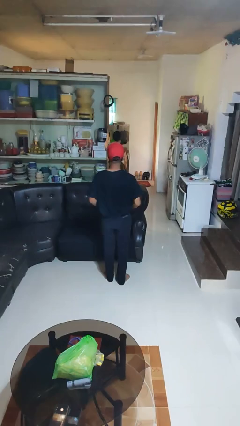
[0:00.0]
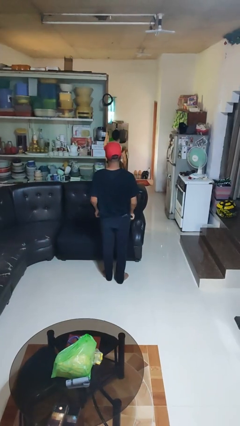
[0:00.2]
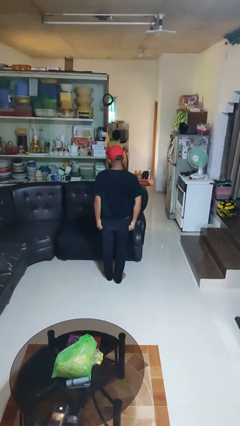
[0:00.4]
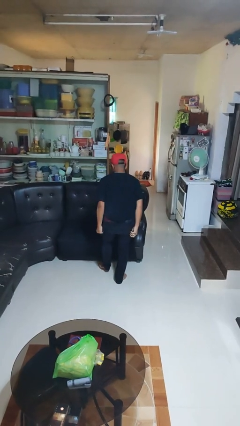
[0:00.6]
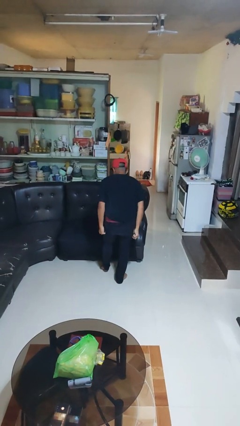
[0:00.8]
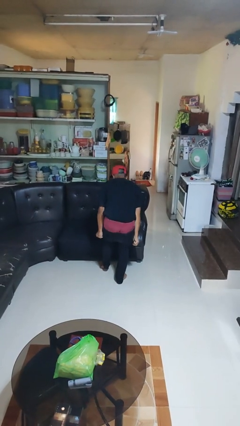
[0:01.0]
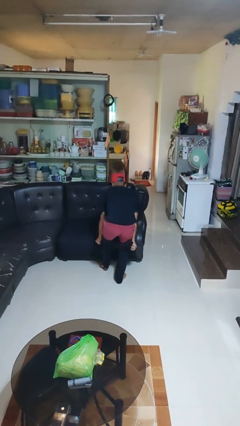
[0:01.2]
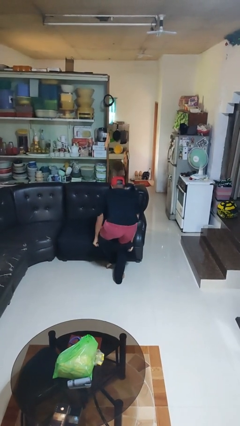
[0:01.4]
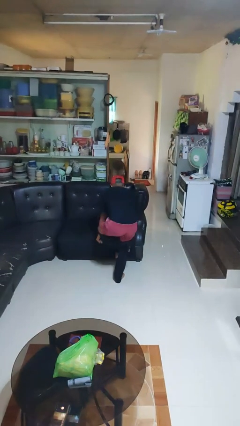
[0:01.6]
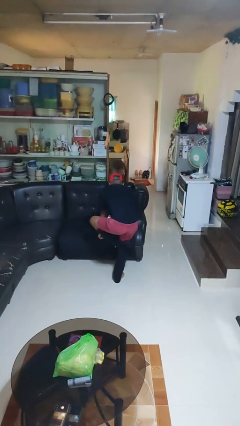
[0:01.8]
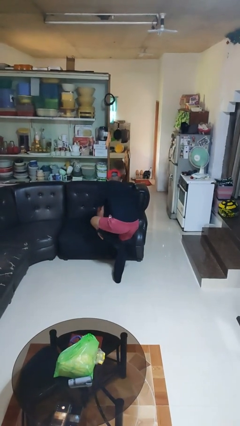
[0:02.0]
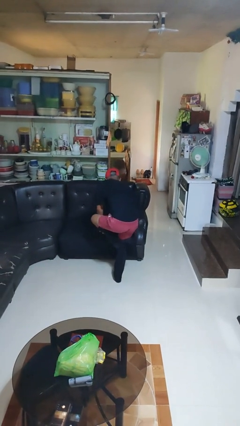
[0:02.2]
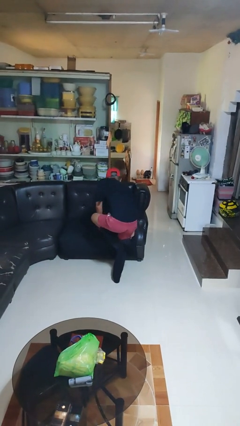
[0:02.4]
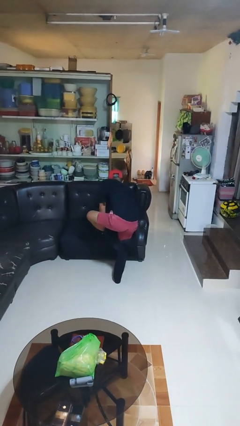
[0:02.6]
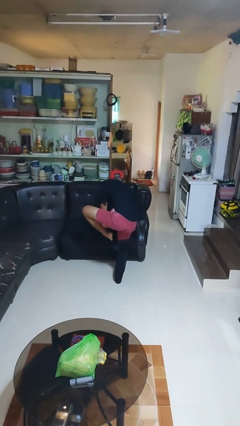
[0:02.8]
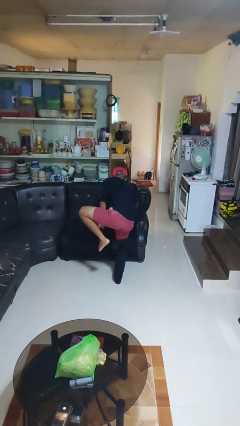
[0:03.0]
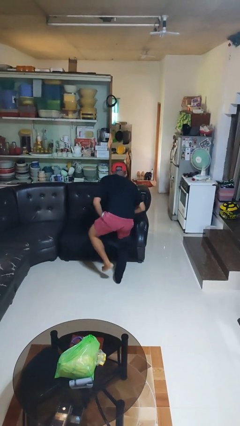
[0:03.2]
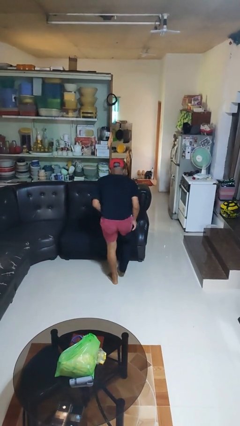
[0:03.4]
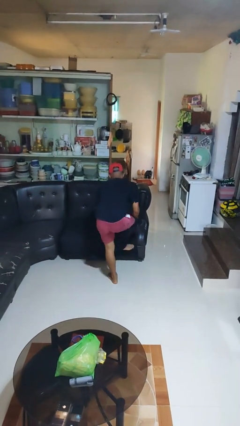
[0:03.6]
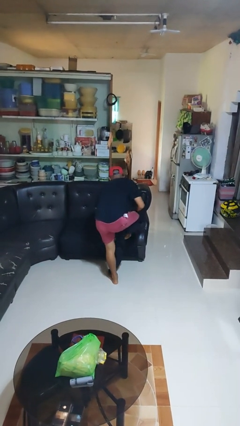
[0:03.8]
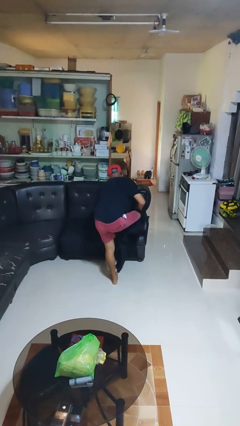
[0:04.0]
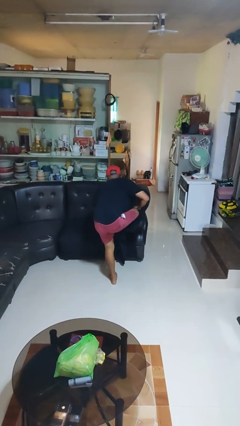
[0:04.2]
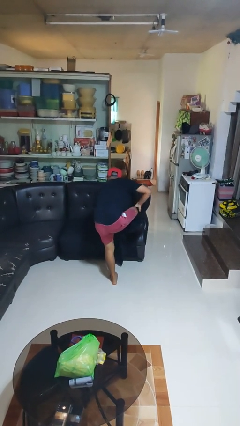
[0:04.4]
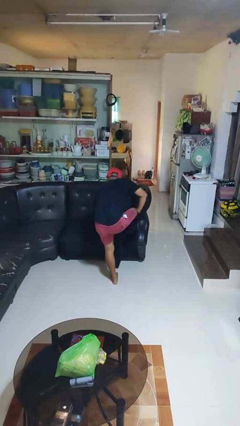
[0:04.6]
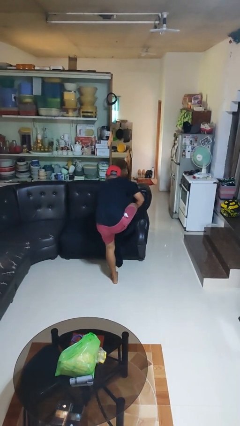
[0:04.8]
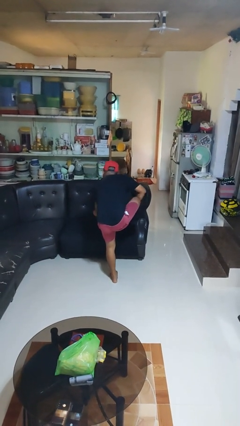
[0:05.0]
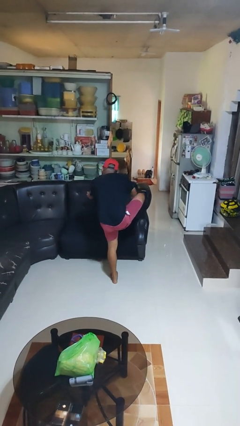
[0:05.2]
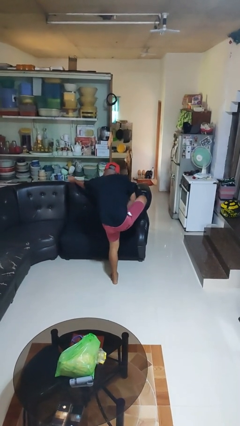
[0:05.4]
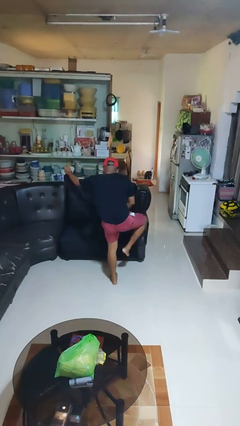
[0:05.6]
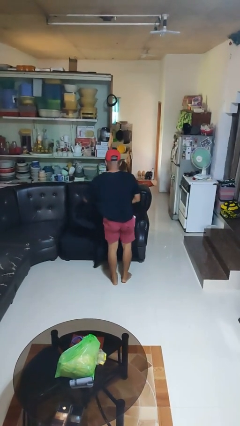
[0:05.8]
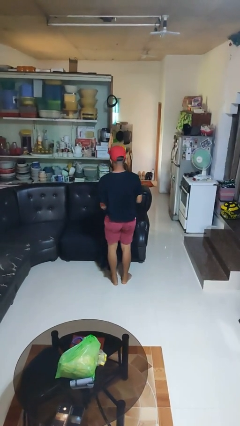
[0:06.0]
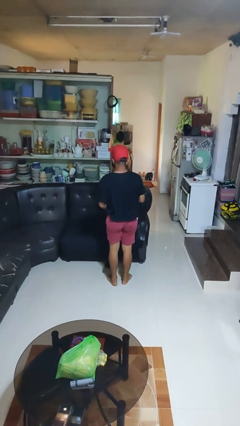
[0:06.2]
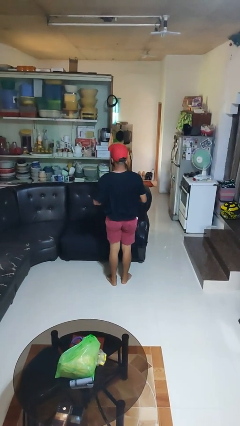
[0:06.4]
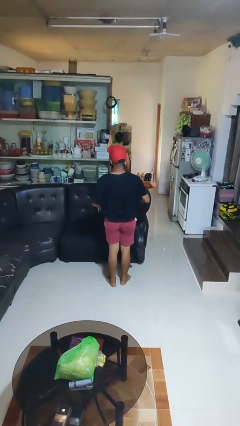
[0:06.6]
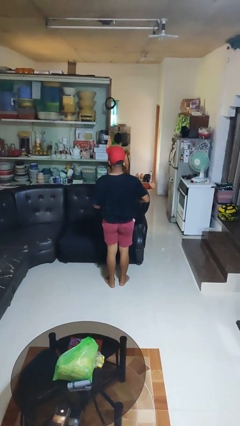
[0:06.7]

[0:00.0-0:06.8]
person takes off pants

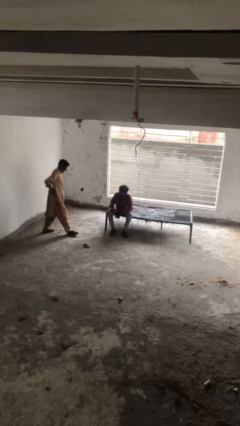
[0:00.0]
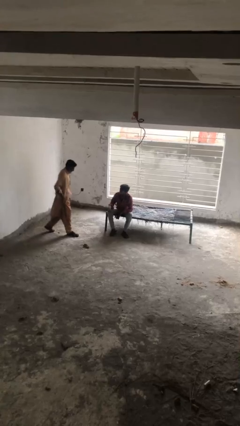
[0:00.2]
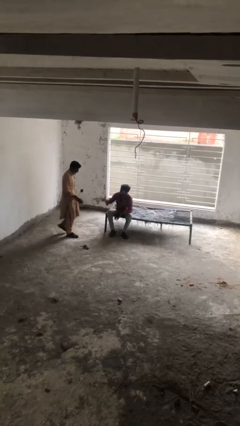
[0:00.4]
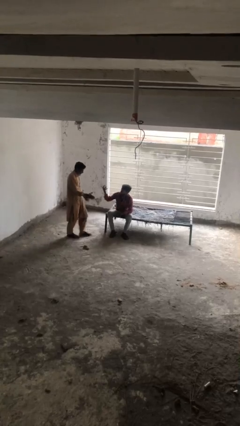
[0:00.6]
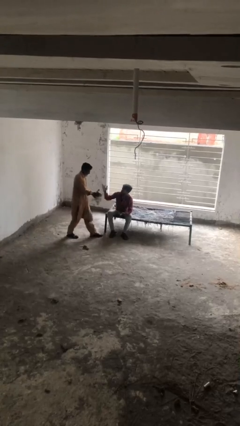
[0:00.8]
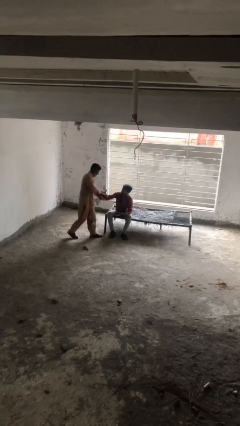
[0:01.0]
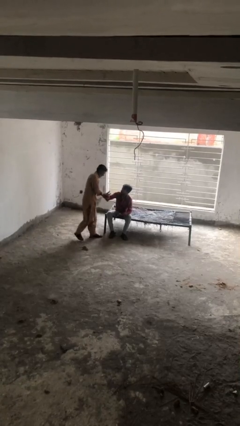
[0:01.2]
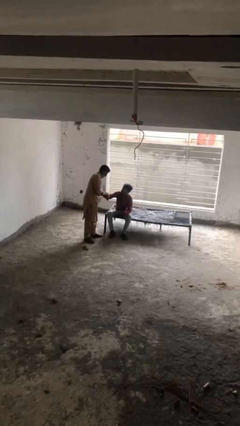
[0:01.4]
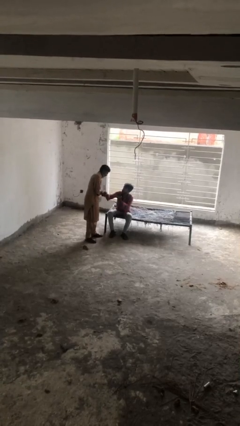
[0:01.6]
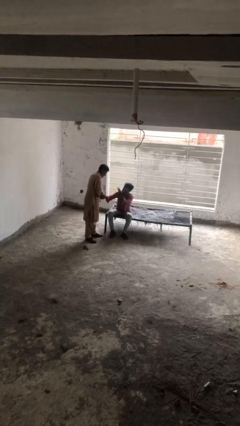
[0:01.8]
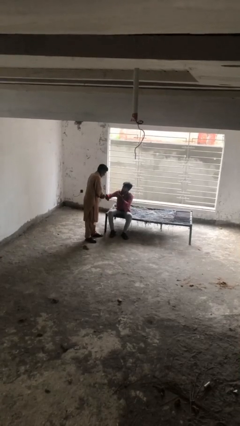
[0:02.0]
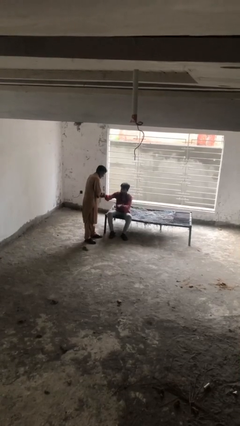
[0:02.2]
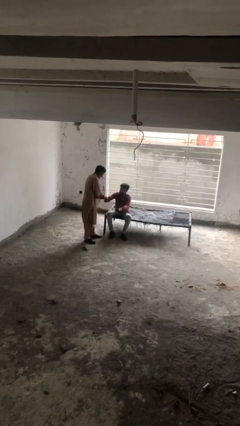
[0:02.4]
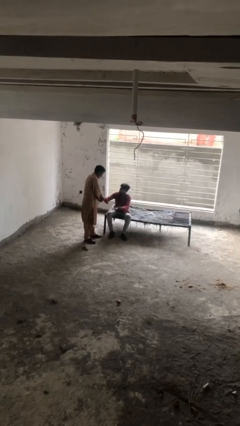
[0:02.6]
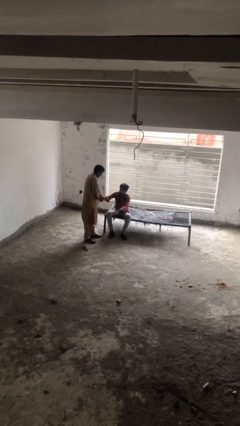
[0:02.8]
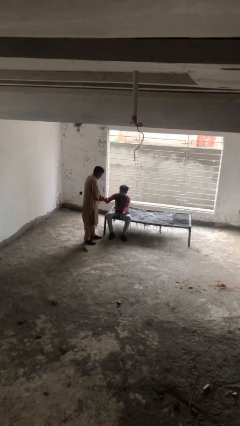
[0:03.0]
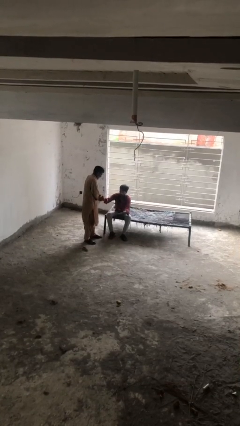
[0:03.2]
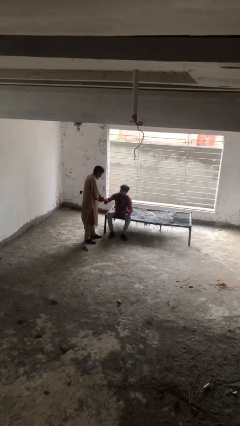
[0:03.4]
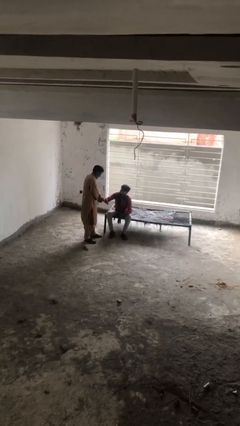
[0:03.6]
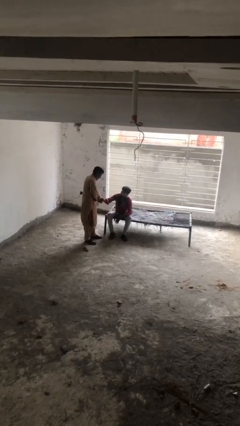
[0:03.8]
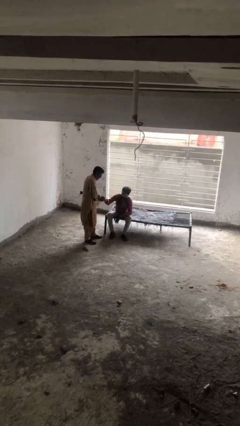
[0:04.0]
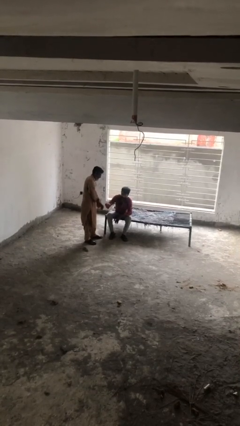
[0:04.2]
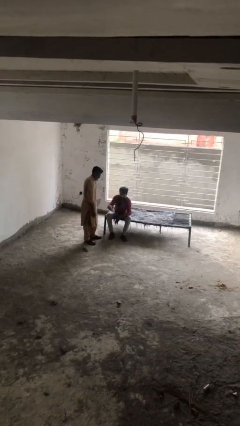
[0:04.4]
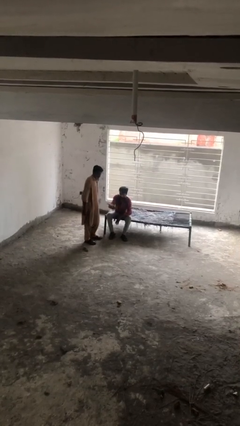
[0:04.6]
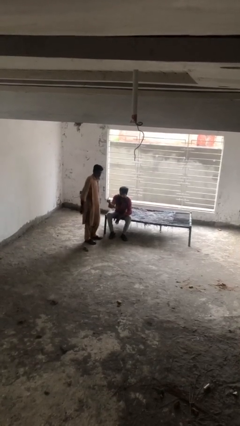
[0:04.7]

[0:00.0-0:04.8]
person shakes hand

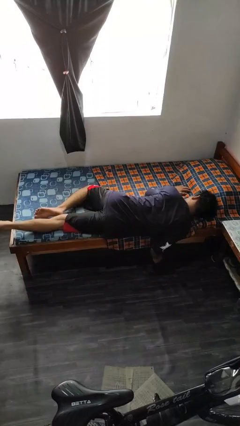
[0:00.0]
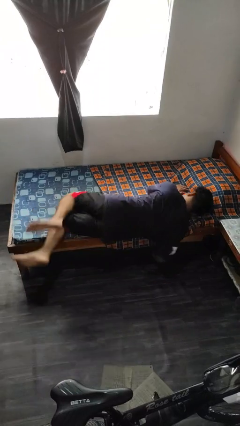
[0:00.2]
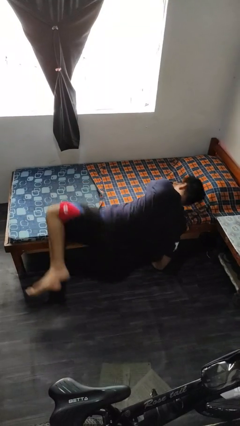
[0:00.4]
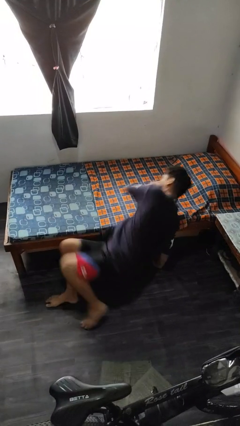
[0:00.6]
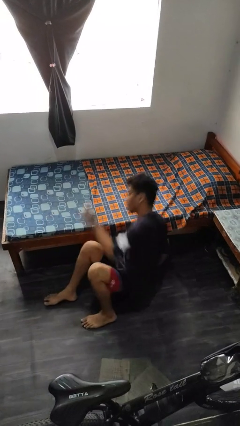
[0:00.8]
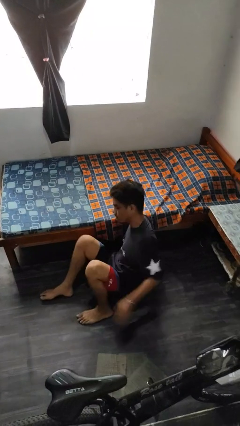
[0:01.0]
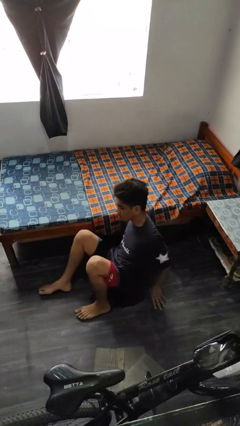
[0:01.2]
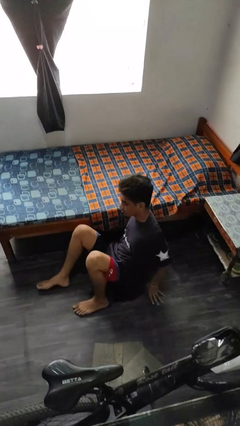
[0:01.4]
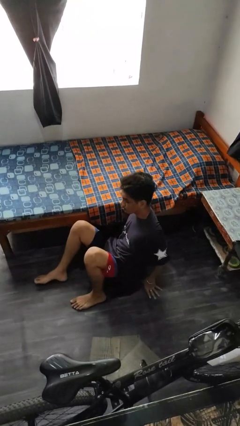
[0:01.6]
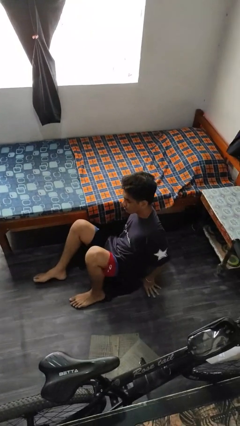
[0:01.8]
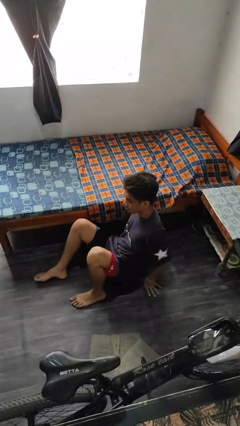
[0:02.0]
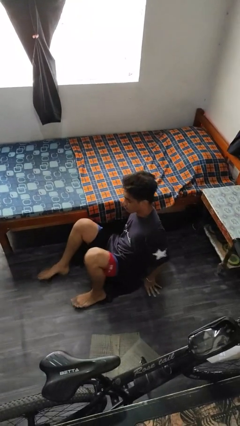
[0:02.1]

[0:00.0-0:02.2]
person falls from bed

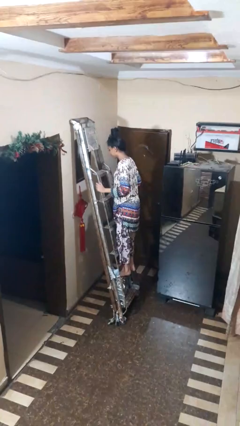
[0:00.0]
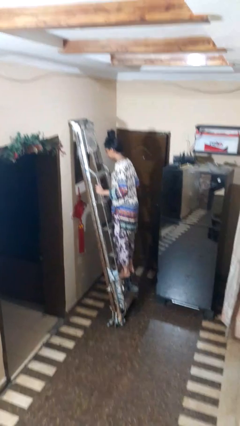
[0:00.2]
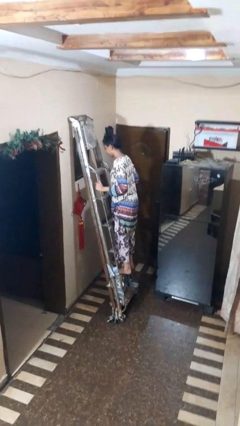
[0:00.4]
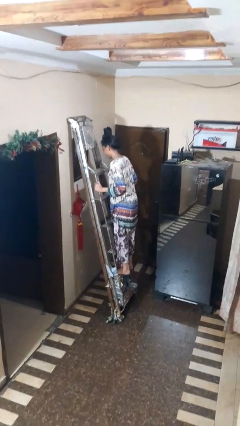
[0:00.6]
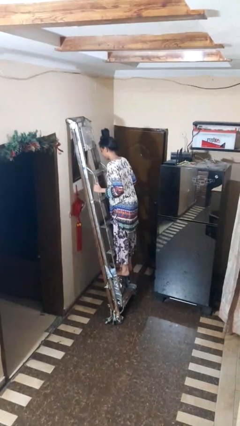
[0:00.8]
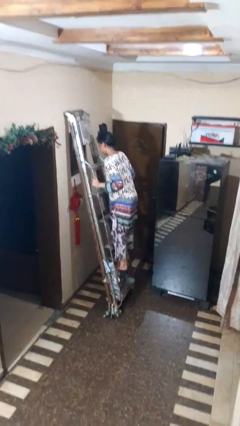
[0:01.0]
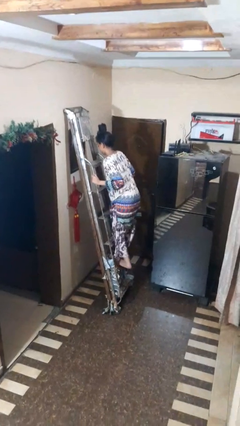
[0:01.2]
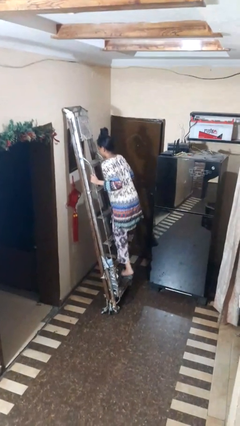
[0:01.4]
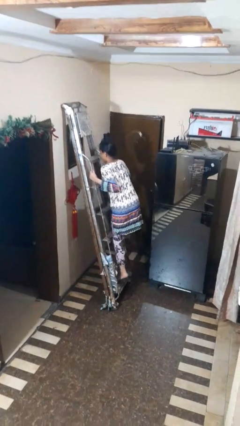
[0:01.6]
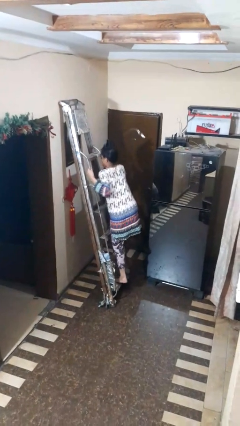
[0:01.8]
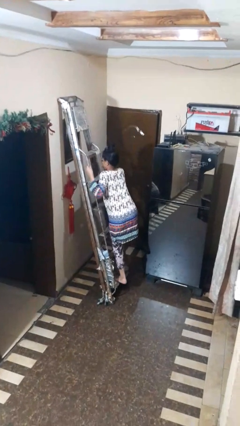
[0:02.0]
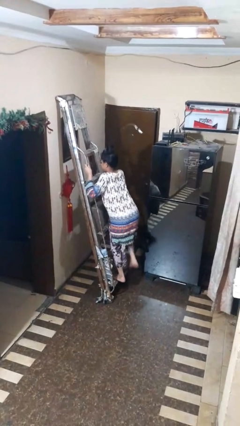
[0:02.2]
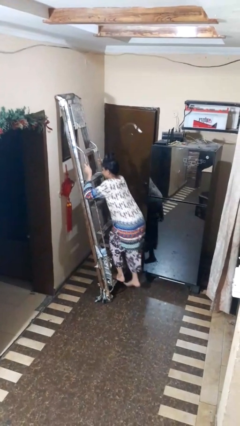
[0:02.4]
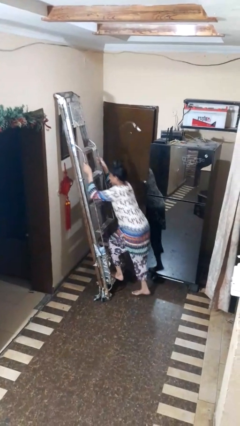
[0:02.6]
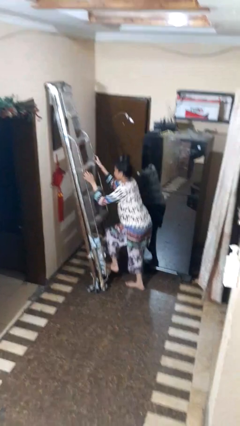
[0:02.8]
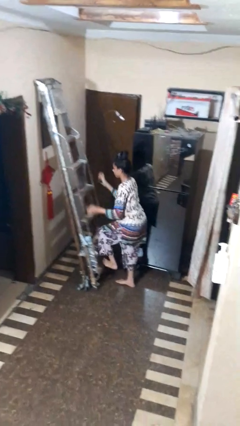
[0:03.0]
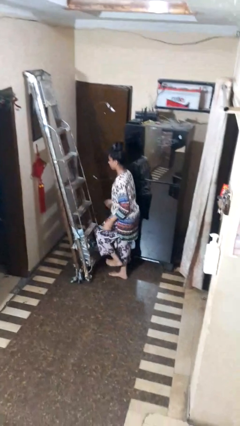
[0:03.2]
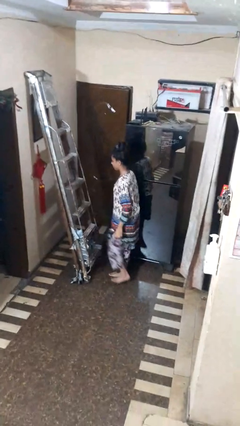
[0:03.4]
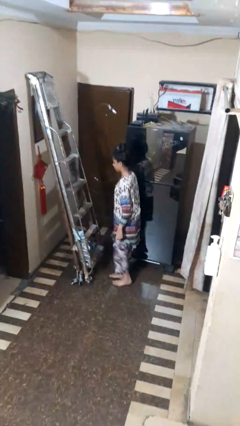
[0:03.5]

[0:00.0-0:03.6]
person climbs down ladder

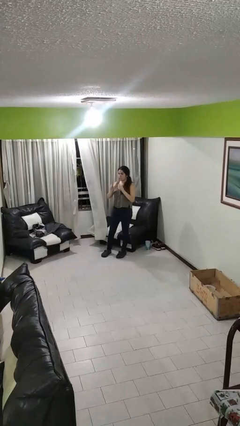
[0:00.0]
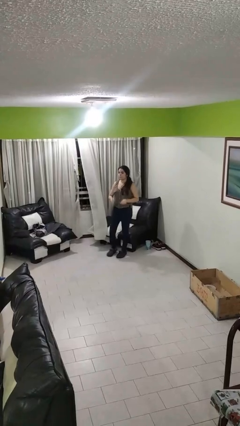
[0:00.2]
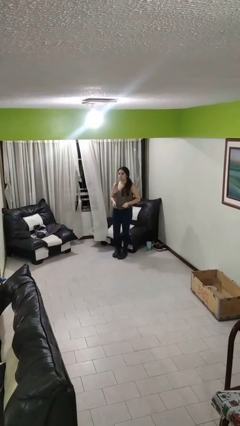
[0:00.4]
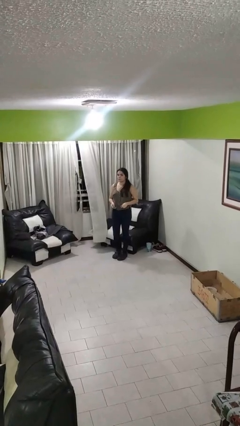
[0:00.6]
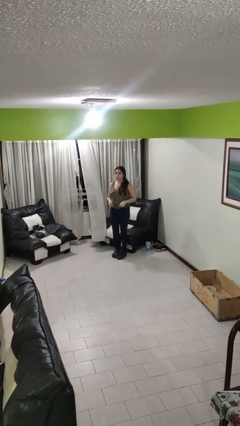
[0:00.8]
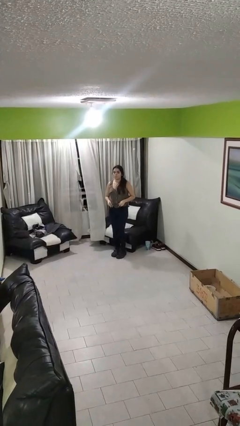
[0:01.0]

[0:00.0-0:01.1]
person takes off glasses
